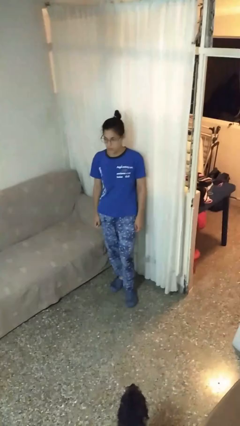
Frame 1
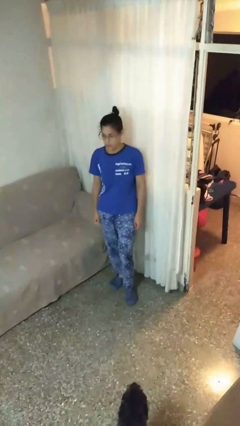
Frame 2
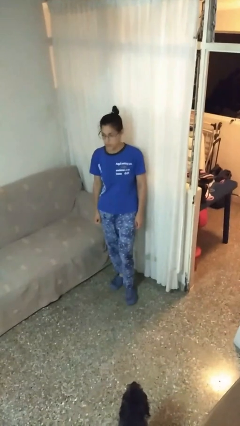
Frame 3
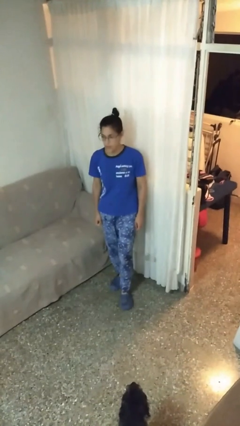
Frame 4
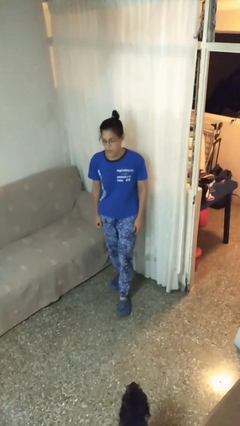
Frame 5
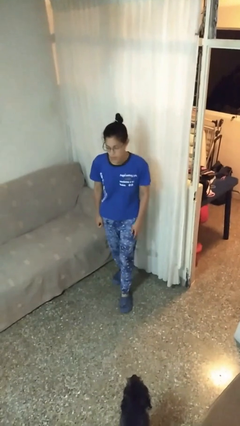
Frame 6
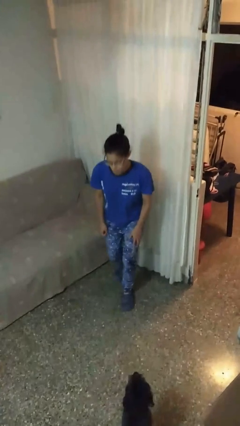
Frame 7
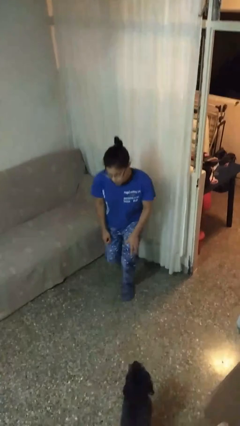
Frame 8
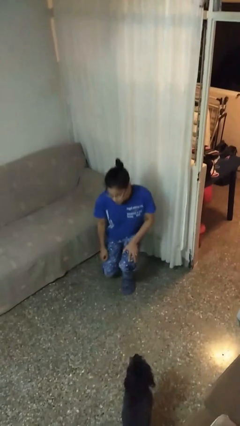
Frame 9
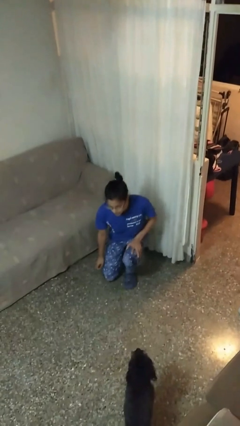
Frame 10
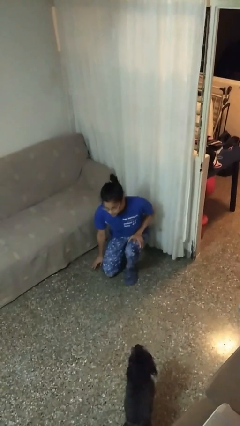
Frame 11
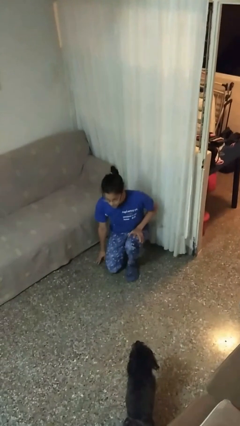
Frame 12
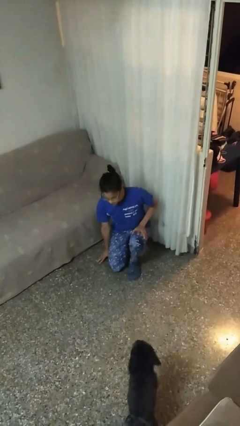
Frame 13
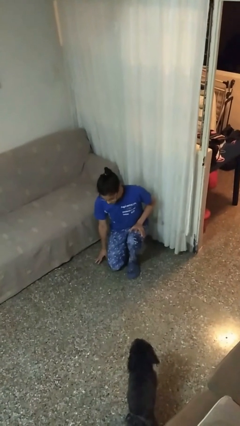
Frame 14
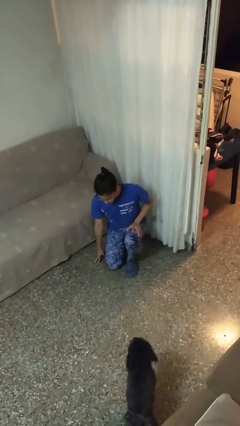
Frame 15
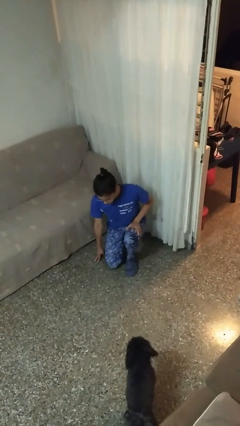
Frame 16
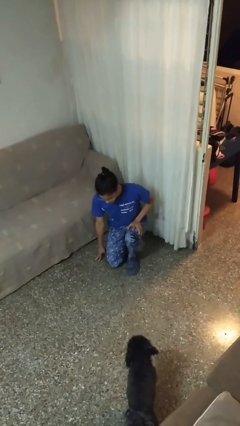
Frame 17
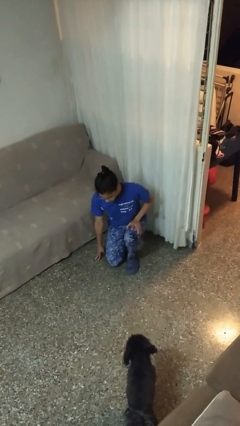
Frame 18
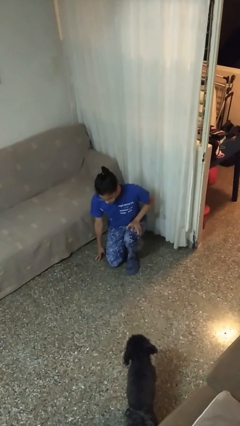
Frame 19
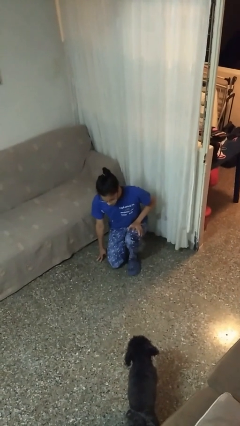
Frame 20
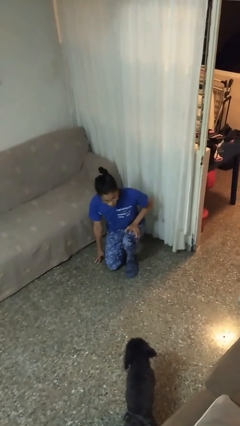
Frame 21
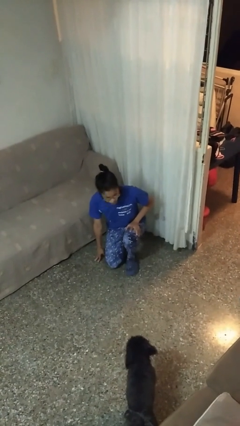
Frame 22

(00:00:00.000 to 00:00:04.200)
person kneels

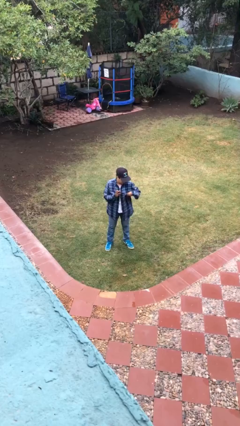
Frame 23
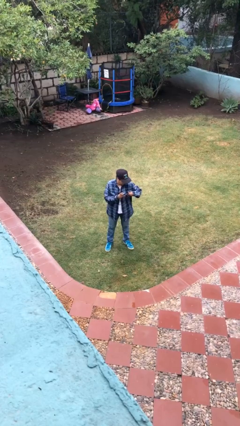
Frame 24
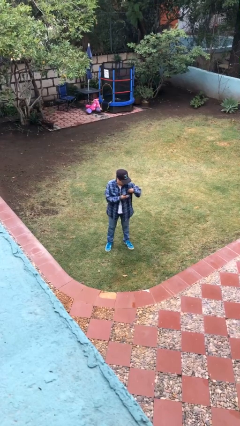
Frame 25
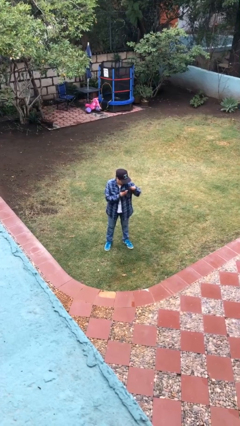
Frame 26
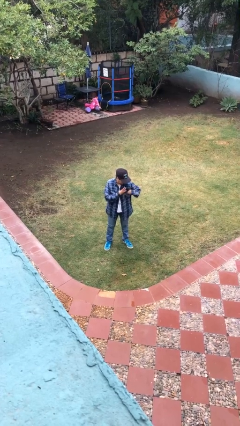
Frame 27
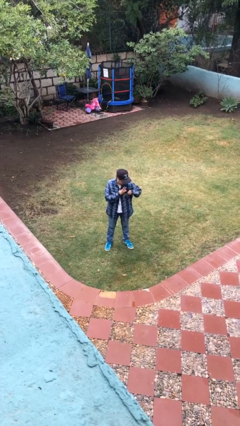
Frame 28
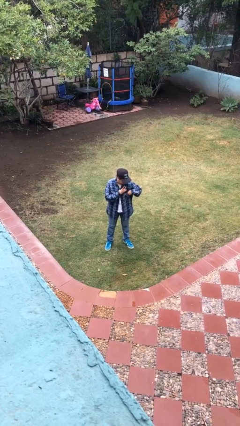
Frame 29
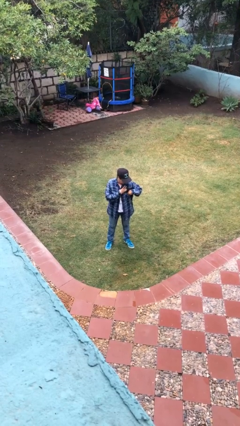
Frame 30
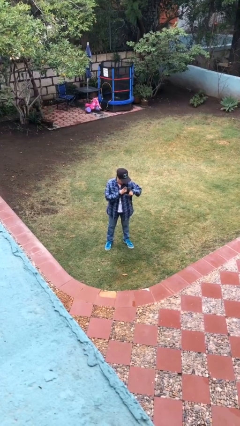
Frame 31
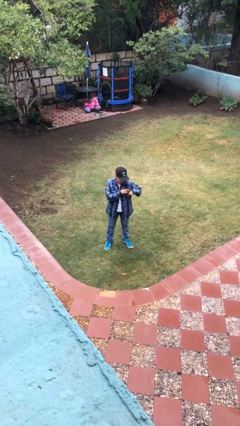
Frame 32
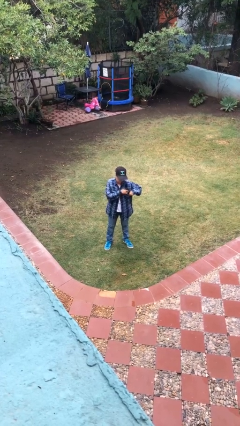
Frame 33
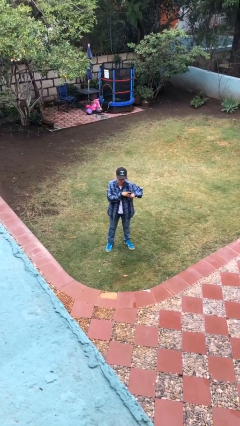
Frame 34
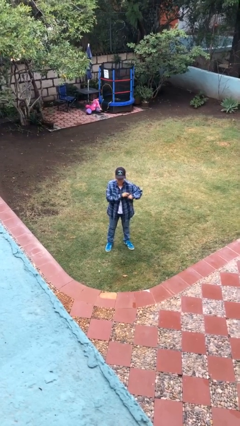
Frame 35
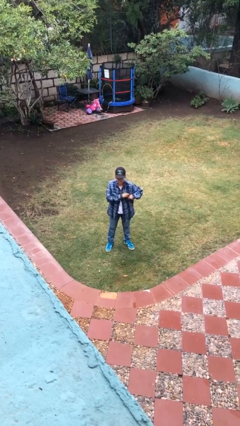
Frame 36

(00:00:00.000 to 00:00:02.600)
person puts phone into pocket

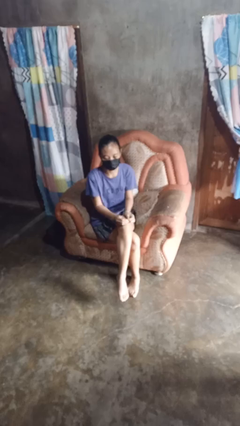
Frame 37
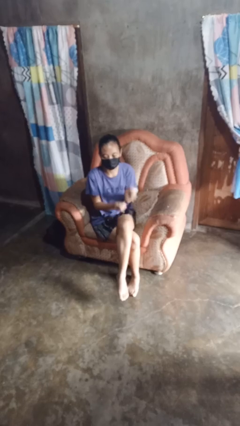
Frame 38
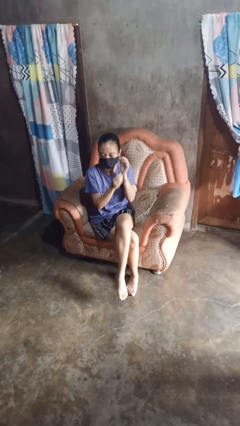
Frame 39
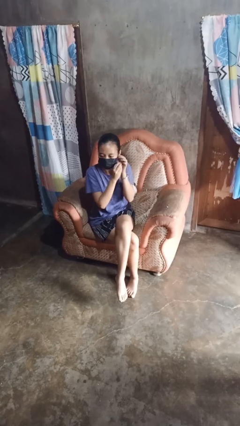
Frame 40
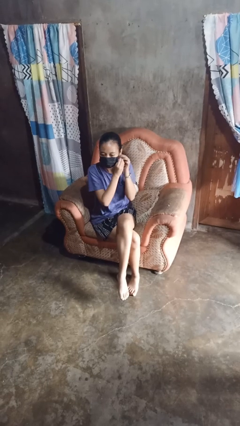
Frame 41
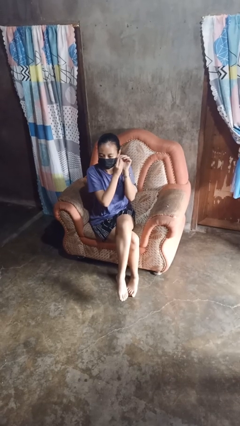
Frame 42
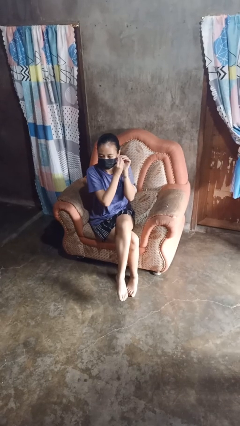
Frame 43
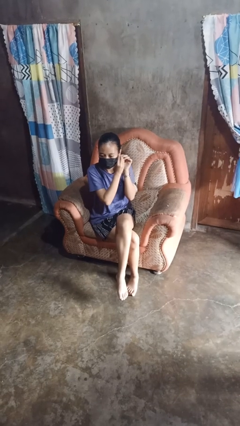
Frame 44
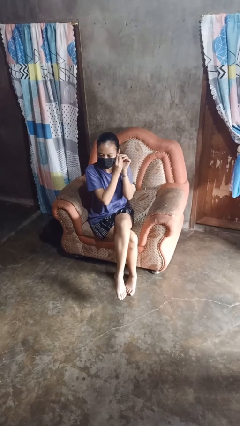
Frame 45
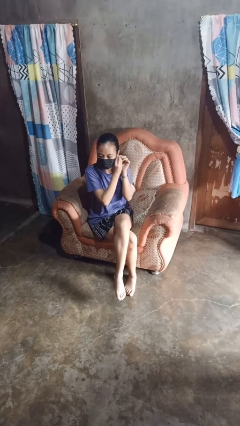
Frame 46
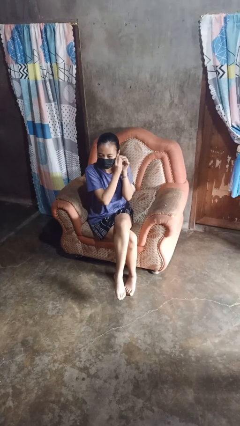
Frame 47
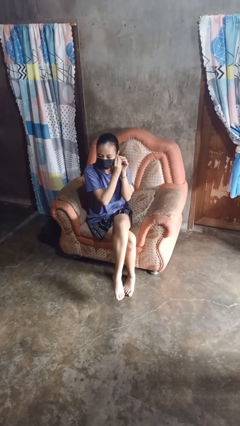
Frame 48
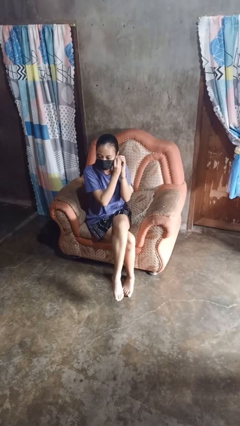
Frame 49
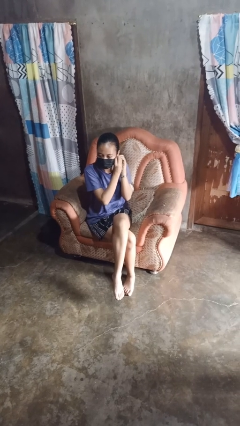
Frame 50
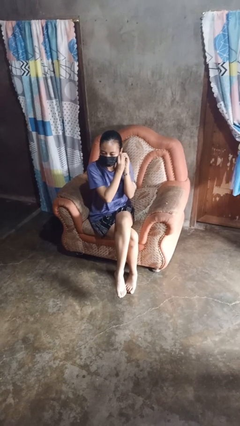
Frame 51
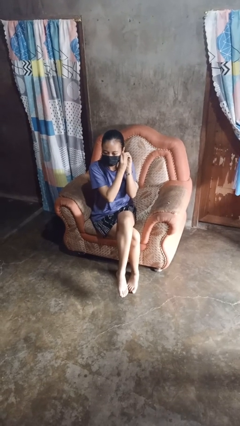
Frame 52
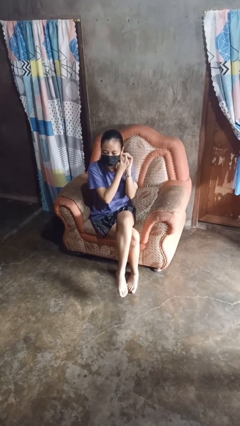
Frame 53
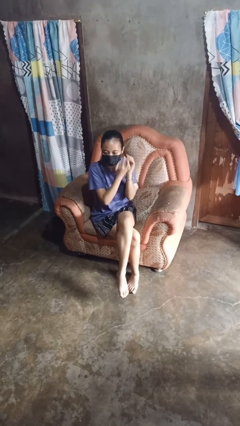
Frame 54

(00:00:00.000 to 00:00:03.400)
person puts on earrings

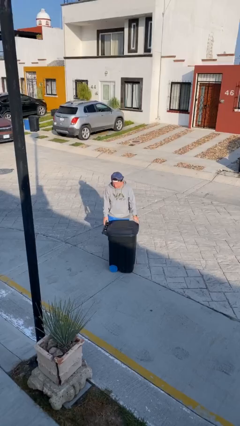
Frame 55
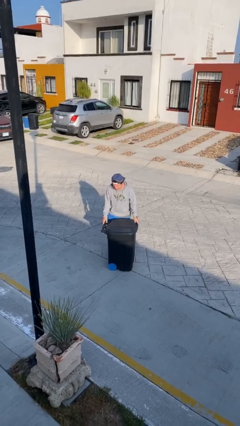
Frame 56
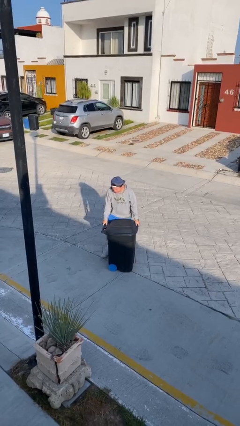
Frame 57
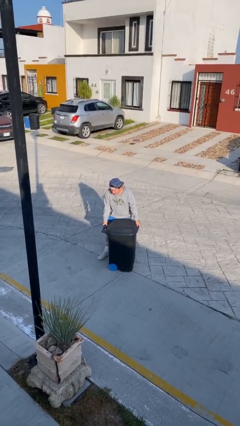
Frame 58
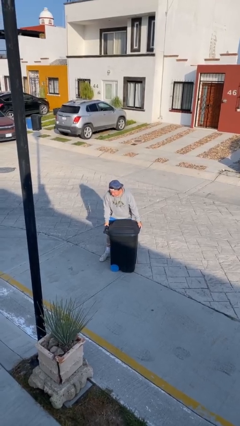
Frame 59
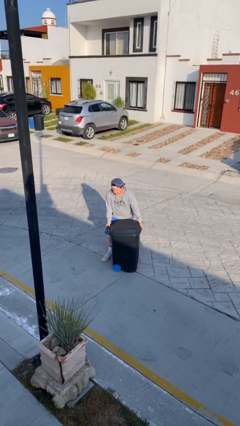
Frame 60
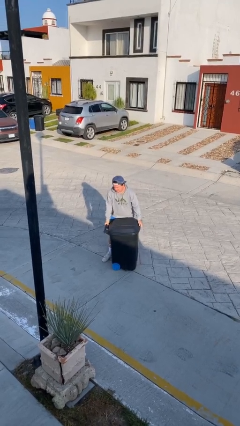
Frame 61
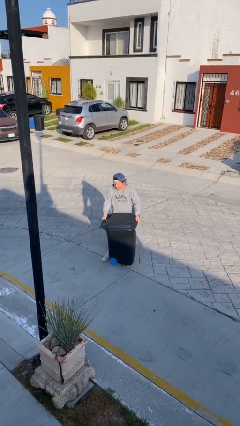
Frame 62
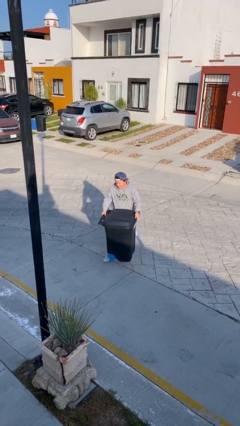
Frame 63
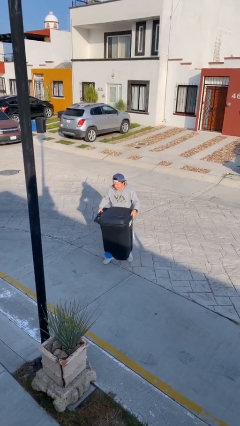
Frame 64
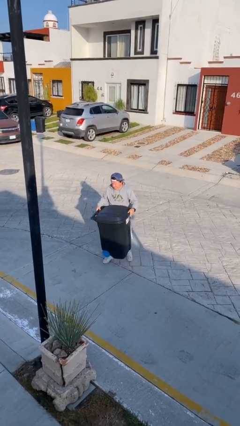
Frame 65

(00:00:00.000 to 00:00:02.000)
person picks up object from floor

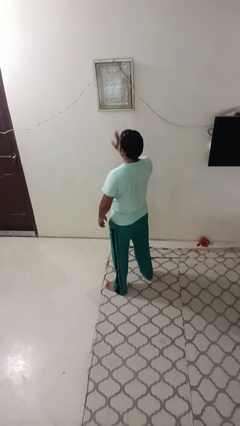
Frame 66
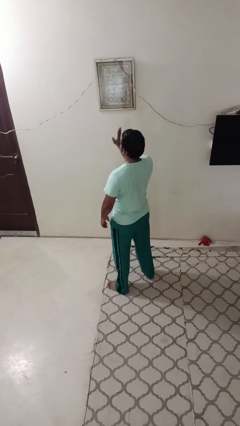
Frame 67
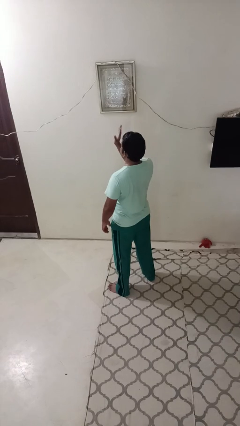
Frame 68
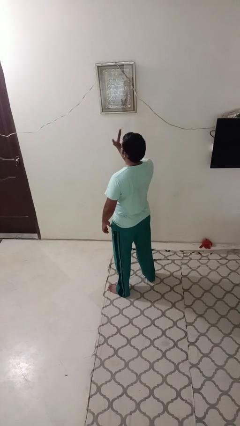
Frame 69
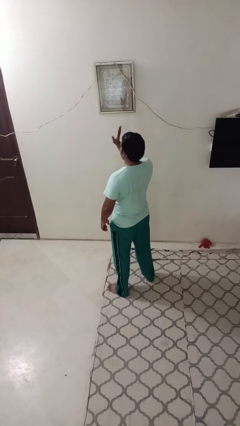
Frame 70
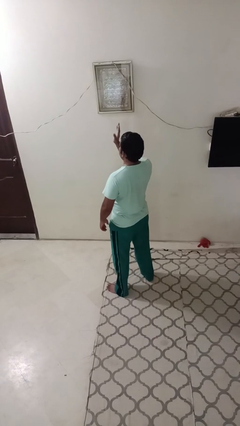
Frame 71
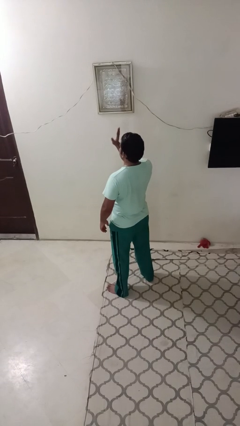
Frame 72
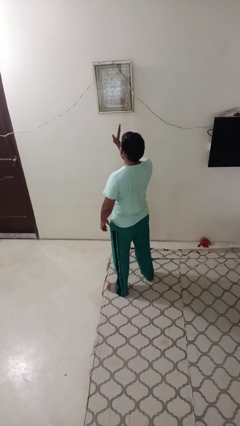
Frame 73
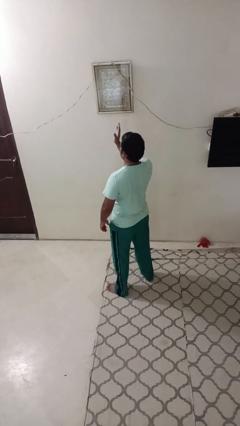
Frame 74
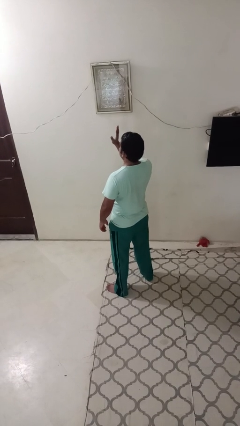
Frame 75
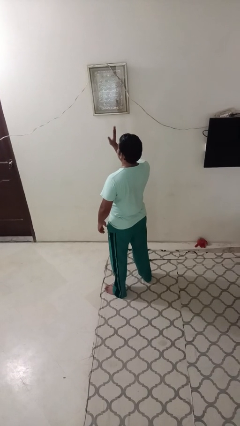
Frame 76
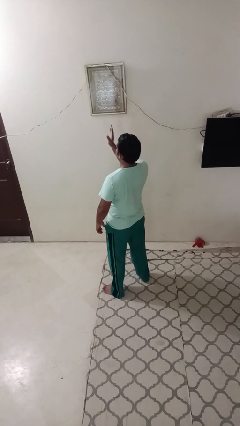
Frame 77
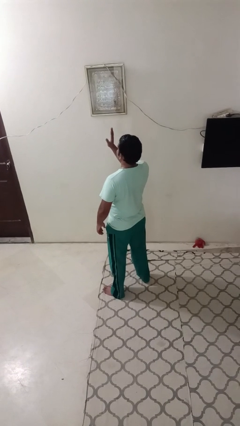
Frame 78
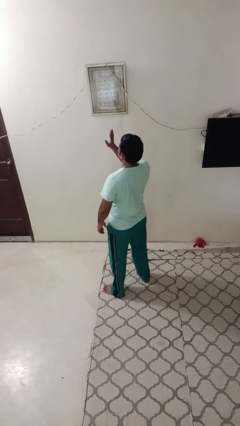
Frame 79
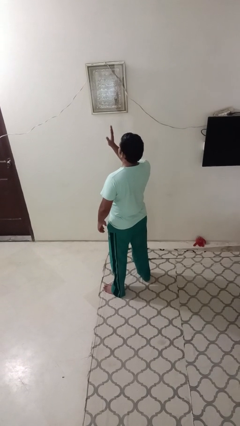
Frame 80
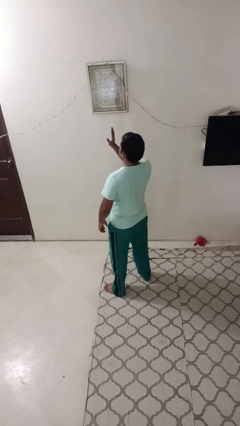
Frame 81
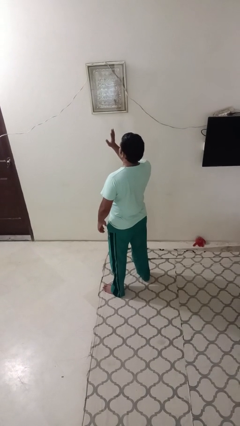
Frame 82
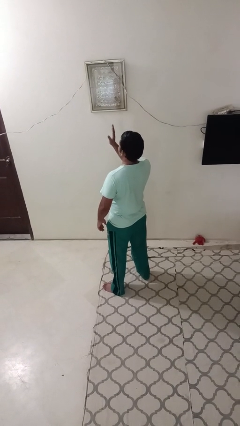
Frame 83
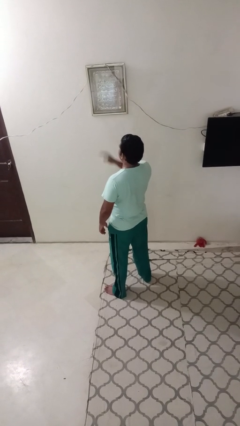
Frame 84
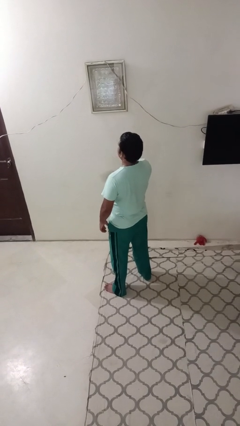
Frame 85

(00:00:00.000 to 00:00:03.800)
person waves at person

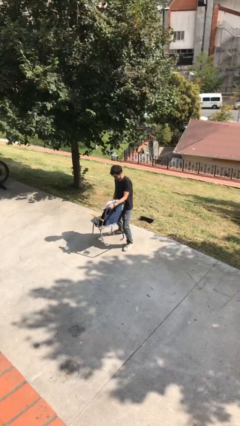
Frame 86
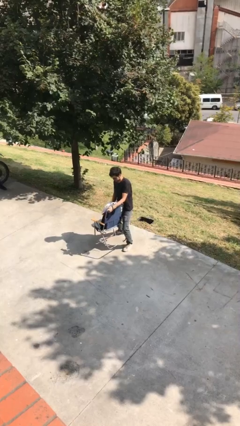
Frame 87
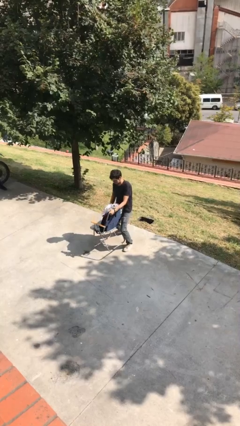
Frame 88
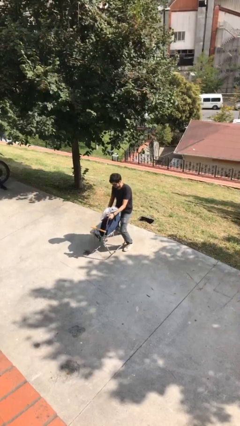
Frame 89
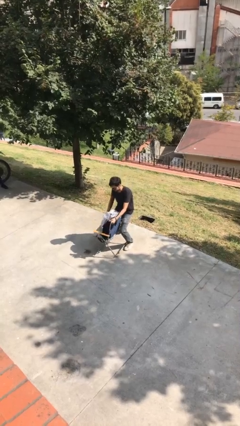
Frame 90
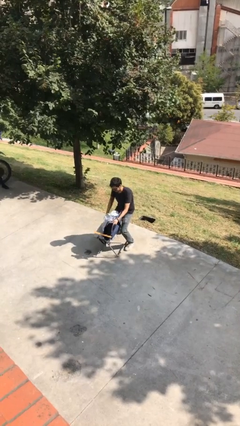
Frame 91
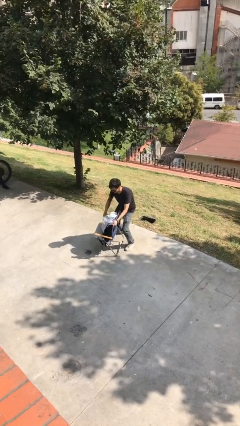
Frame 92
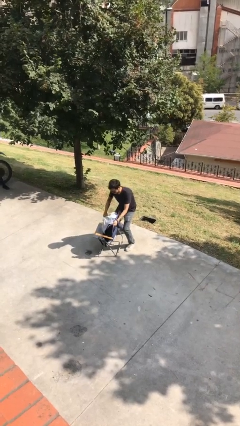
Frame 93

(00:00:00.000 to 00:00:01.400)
person puts down object on floor
